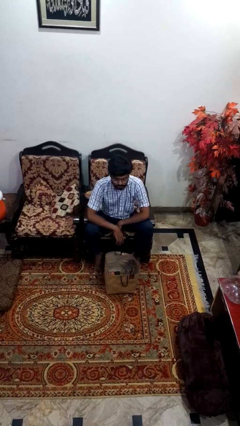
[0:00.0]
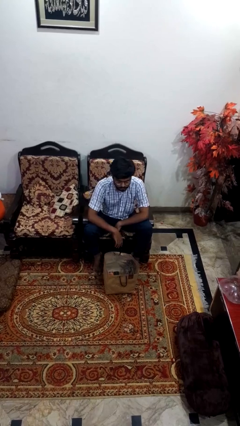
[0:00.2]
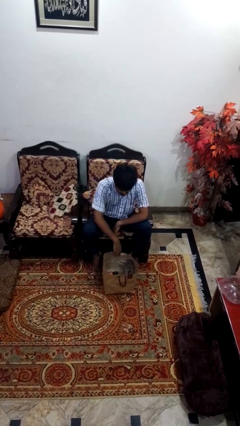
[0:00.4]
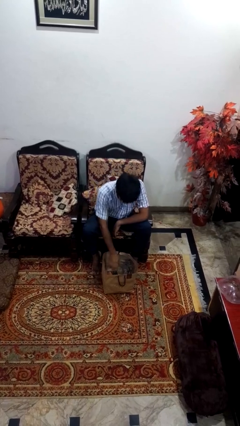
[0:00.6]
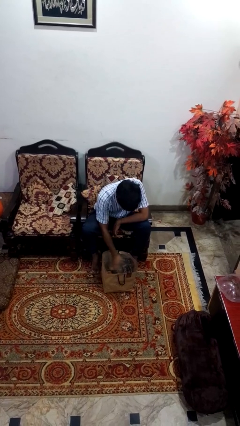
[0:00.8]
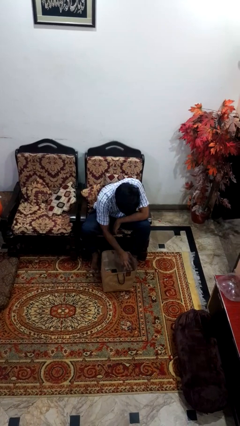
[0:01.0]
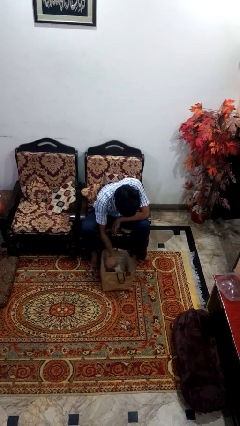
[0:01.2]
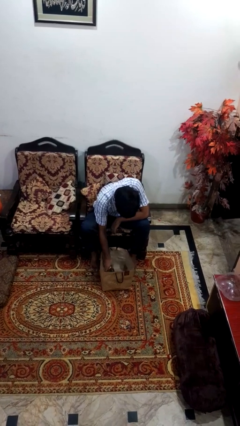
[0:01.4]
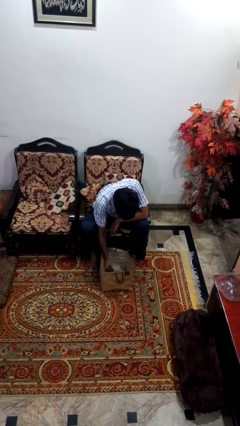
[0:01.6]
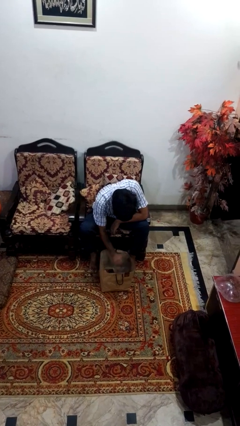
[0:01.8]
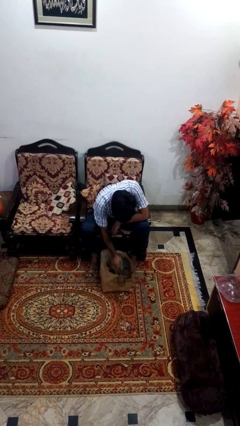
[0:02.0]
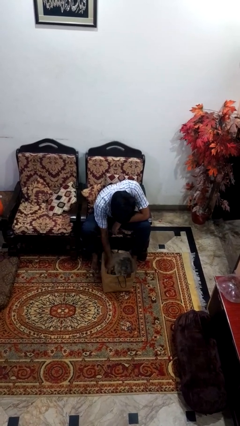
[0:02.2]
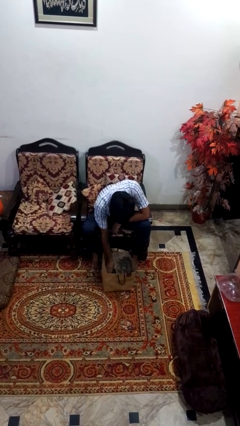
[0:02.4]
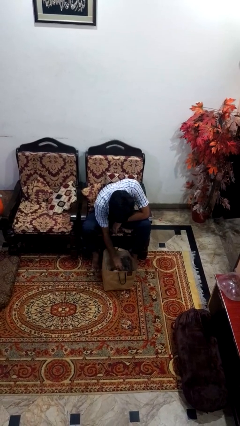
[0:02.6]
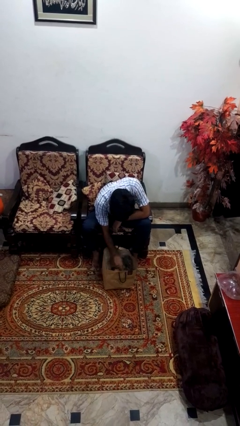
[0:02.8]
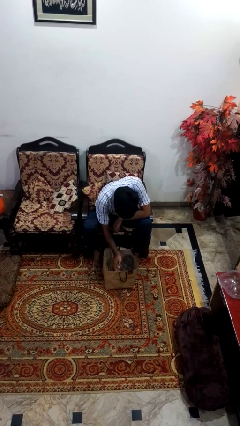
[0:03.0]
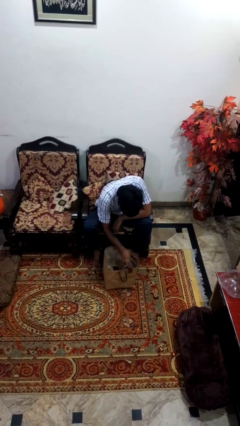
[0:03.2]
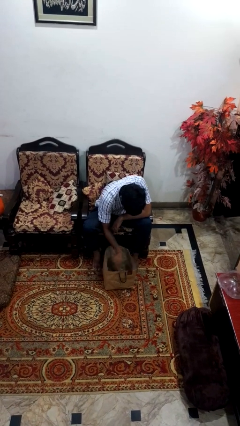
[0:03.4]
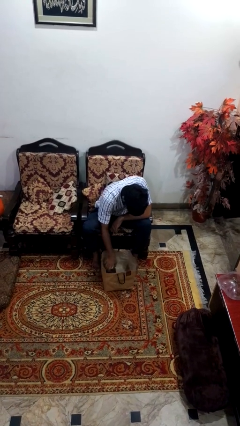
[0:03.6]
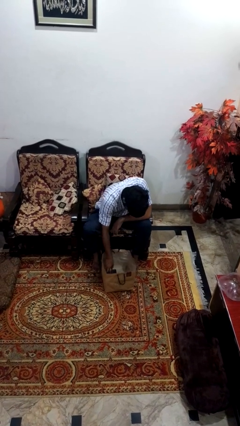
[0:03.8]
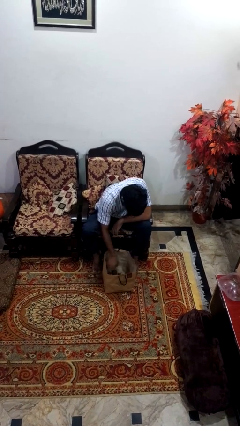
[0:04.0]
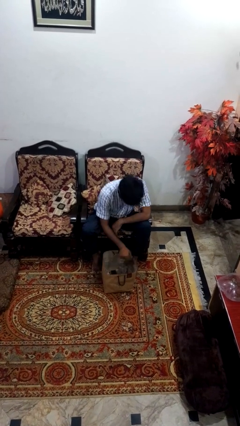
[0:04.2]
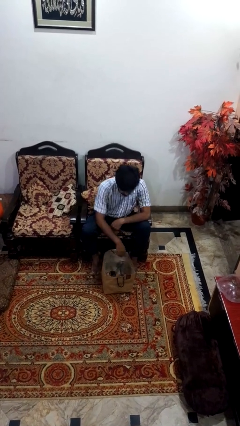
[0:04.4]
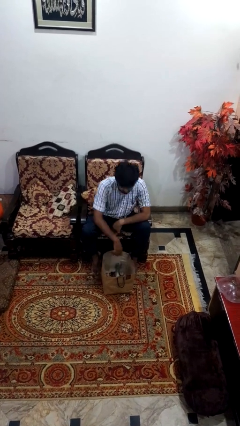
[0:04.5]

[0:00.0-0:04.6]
person searches in bag

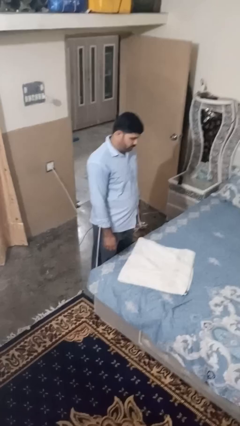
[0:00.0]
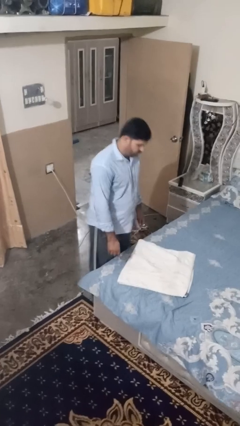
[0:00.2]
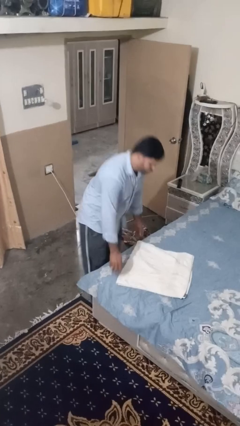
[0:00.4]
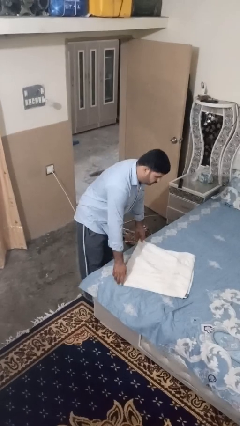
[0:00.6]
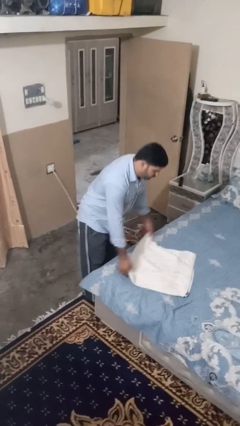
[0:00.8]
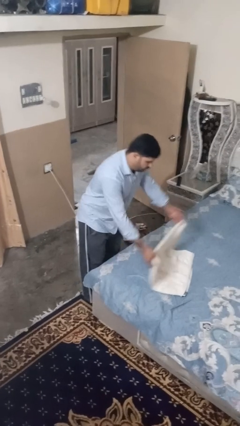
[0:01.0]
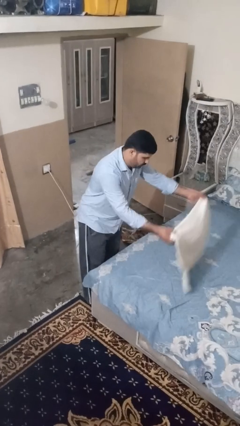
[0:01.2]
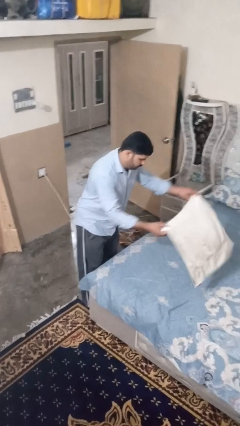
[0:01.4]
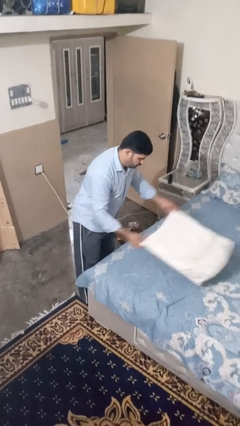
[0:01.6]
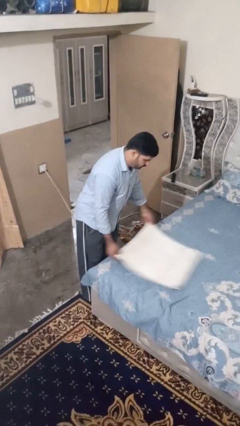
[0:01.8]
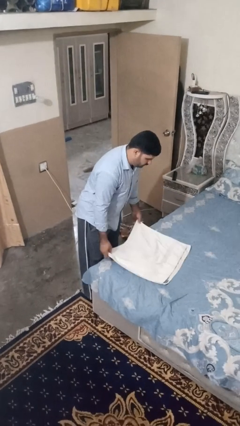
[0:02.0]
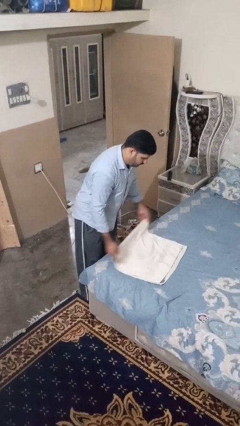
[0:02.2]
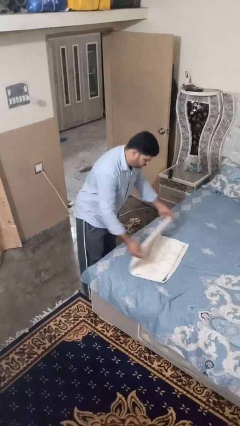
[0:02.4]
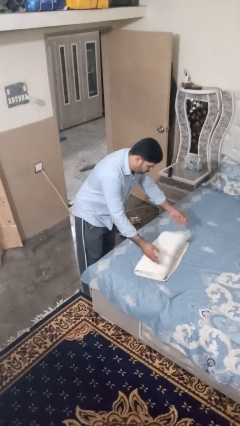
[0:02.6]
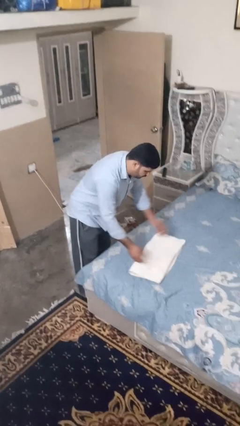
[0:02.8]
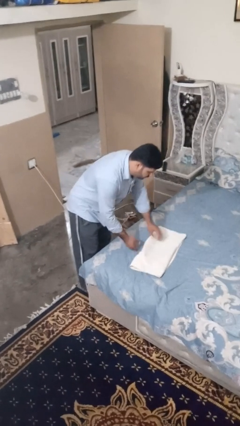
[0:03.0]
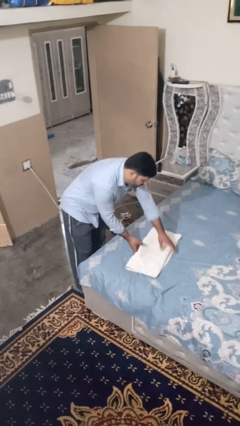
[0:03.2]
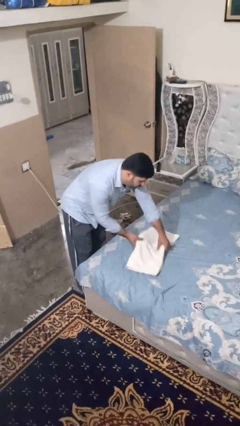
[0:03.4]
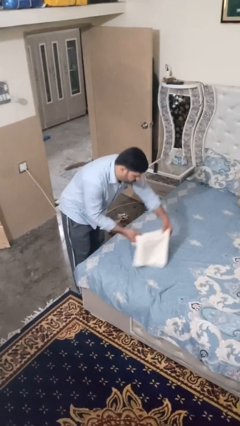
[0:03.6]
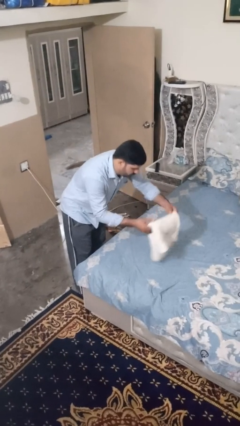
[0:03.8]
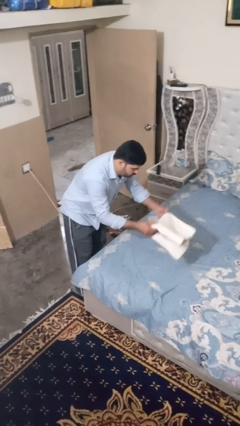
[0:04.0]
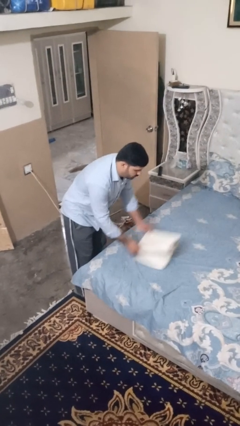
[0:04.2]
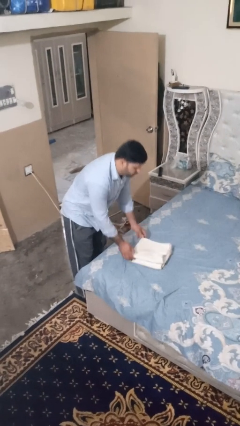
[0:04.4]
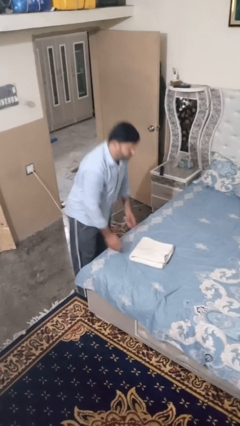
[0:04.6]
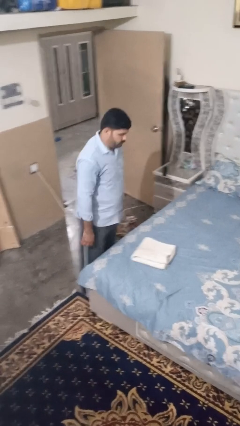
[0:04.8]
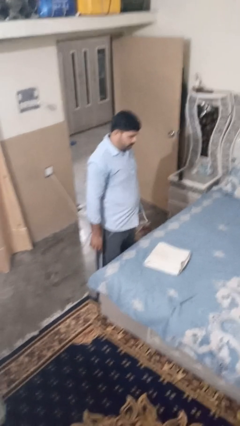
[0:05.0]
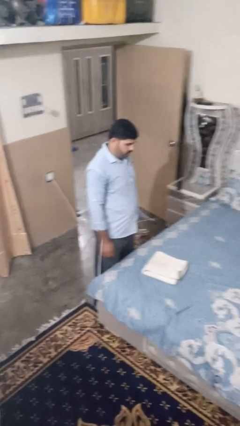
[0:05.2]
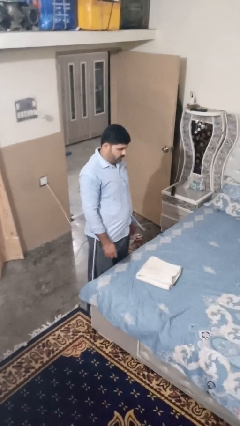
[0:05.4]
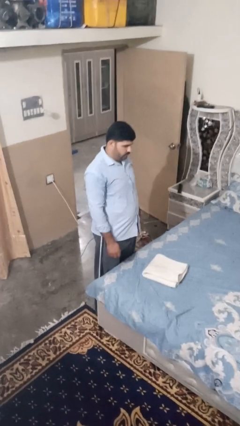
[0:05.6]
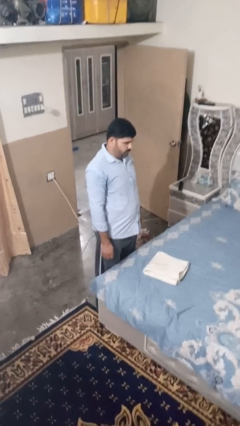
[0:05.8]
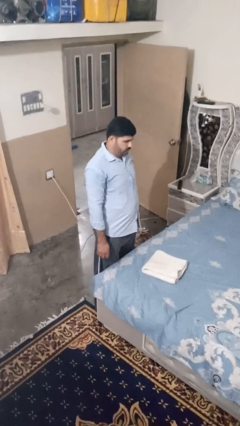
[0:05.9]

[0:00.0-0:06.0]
person folds towel

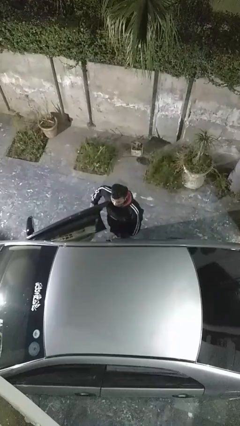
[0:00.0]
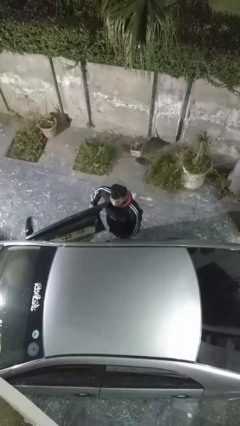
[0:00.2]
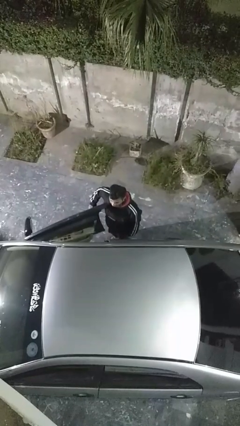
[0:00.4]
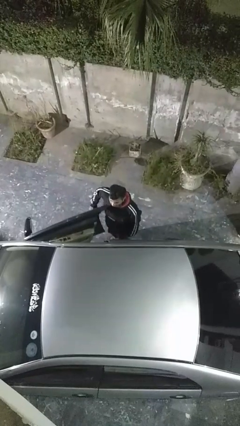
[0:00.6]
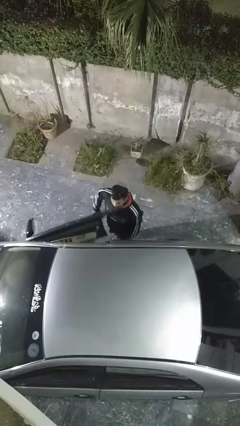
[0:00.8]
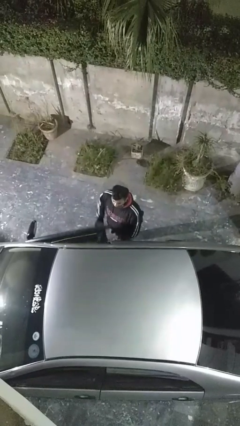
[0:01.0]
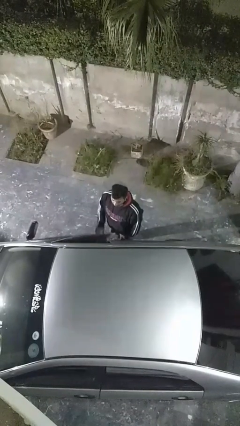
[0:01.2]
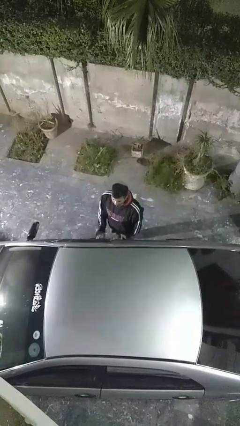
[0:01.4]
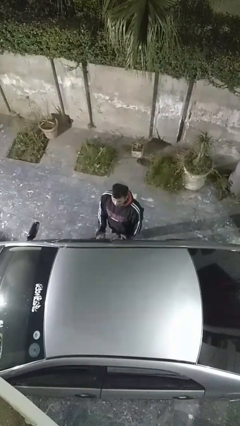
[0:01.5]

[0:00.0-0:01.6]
person closes car door

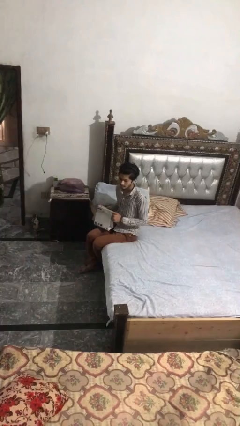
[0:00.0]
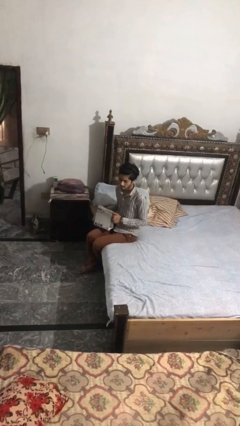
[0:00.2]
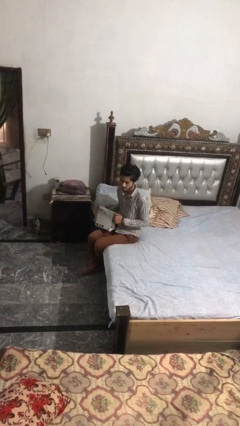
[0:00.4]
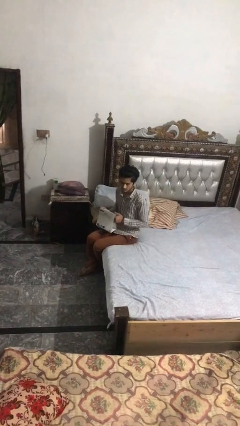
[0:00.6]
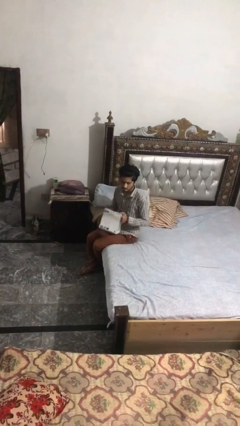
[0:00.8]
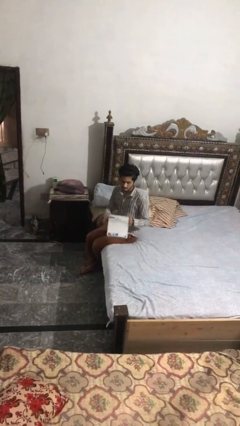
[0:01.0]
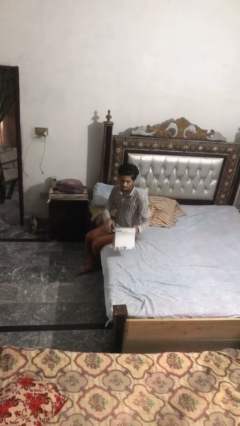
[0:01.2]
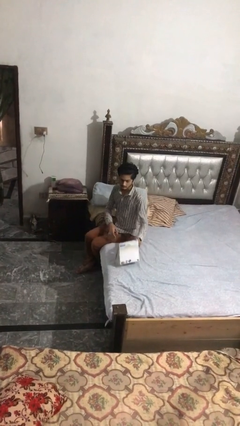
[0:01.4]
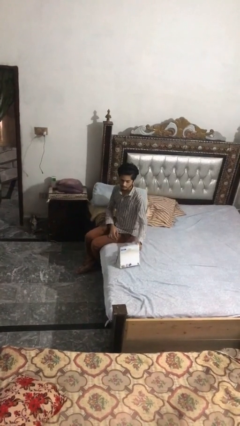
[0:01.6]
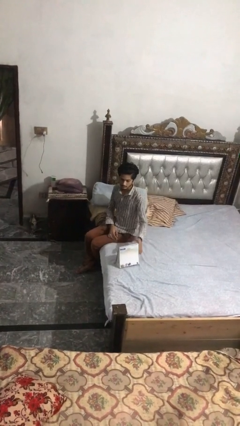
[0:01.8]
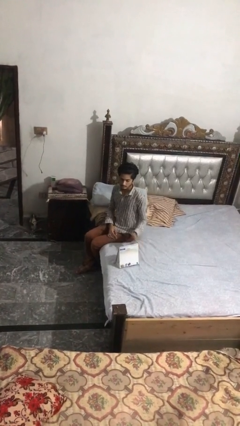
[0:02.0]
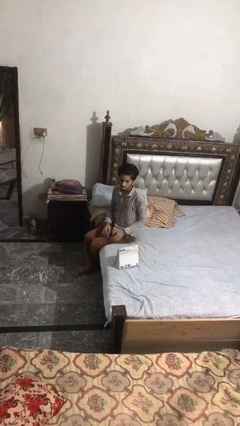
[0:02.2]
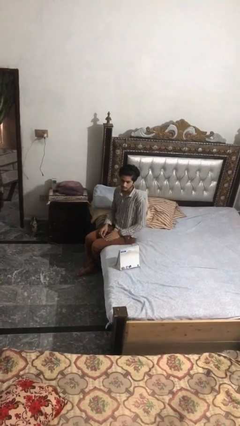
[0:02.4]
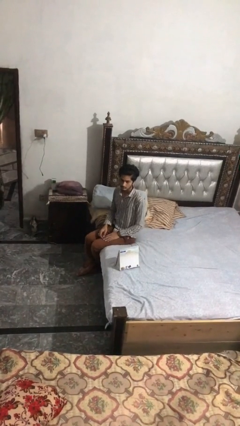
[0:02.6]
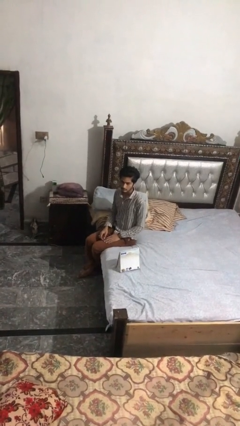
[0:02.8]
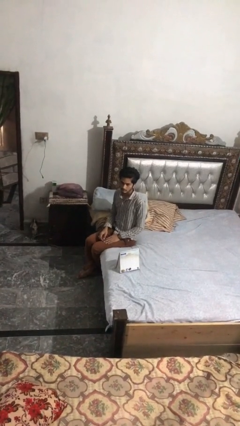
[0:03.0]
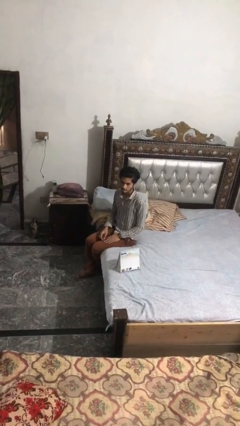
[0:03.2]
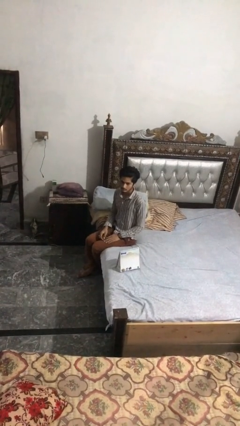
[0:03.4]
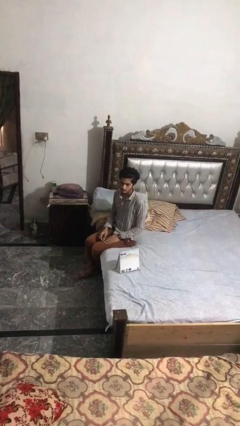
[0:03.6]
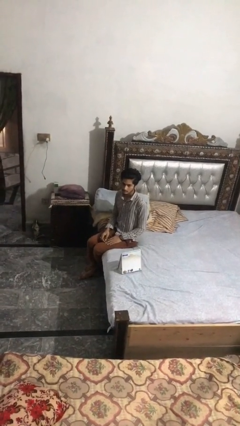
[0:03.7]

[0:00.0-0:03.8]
person puts down object on bed

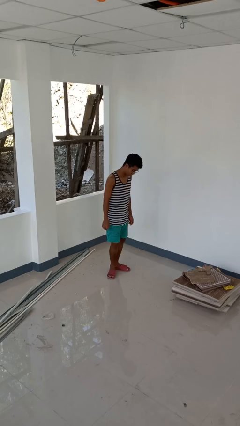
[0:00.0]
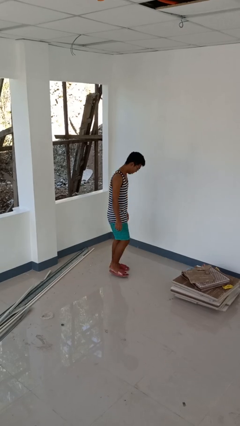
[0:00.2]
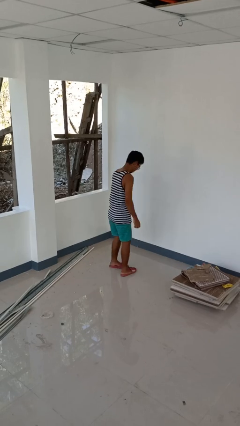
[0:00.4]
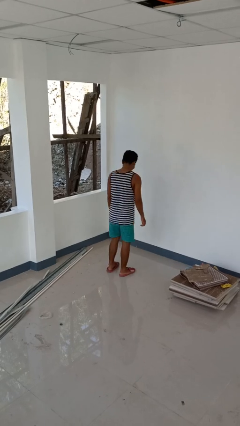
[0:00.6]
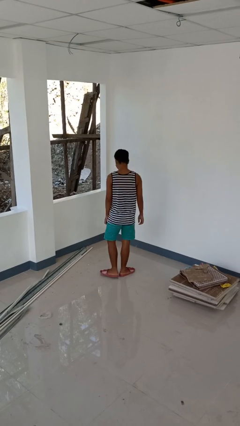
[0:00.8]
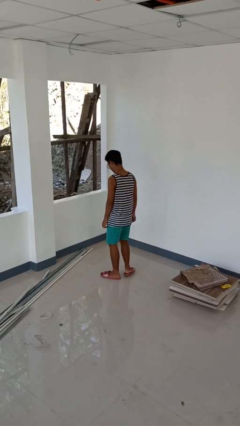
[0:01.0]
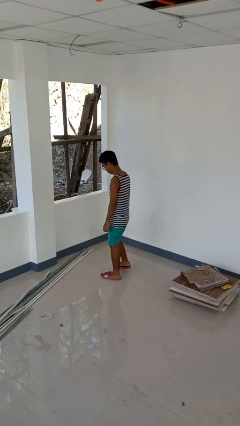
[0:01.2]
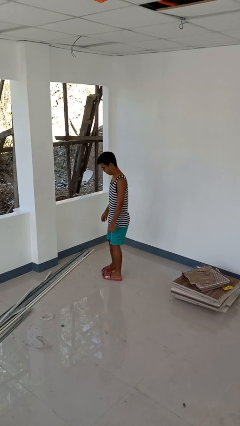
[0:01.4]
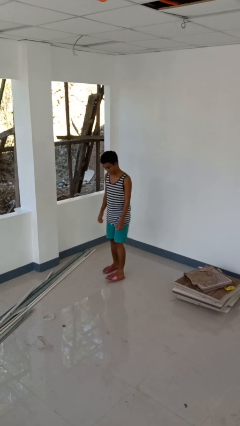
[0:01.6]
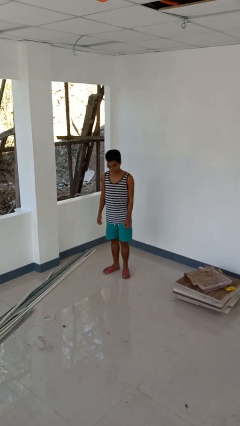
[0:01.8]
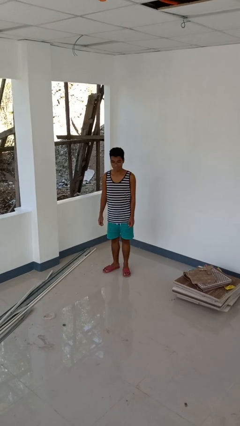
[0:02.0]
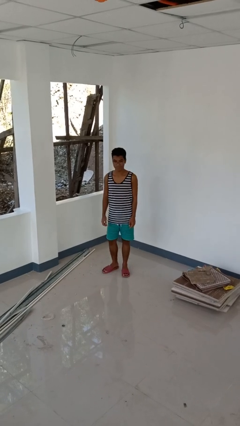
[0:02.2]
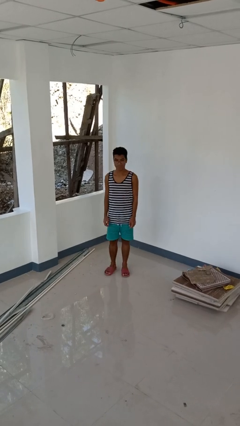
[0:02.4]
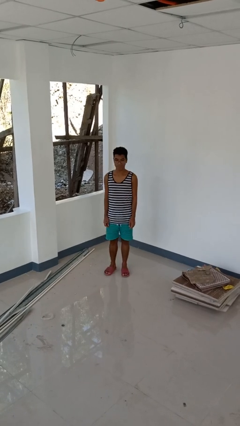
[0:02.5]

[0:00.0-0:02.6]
person twirls
